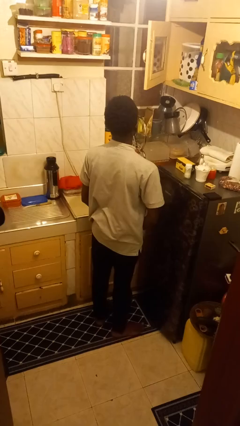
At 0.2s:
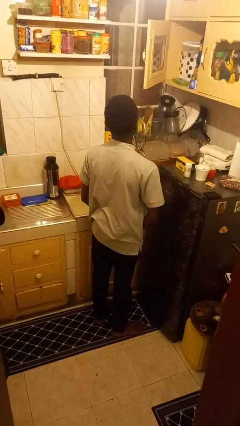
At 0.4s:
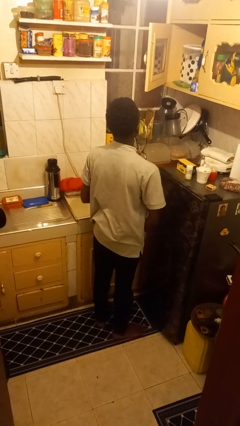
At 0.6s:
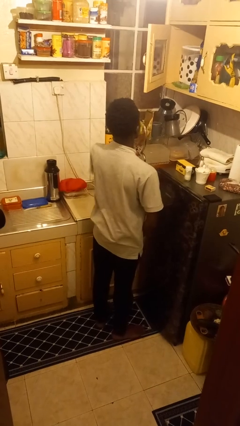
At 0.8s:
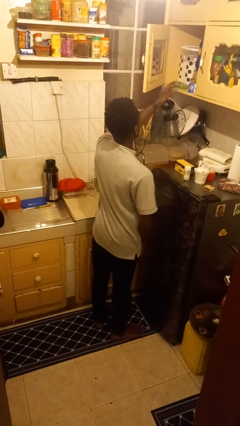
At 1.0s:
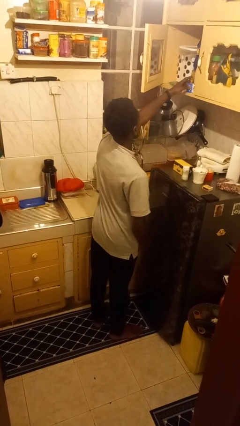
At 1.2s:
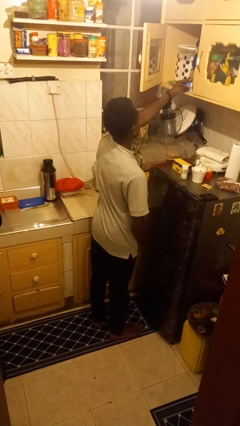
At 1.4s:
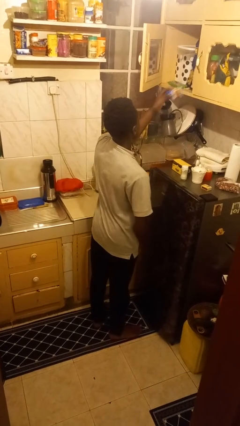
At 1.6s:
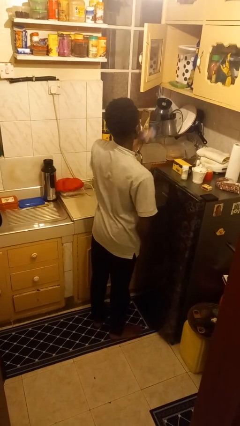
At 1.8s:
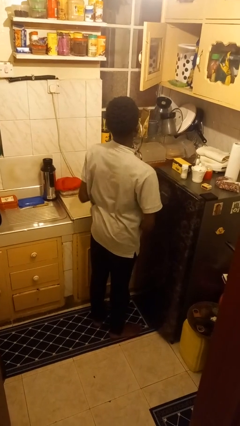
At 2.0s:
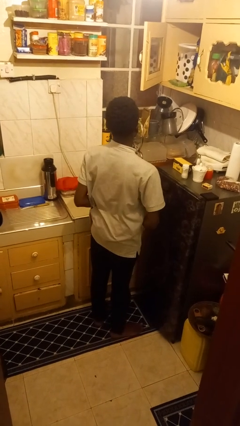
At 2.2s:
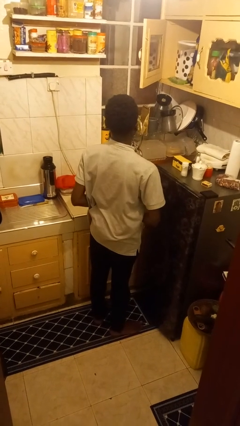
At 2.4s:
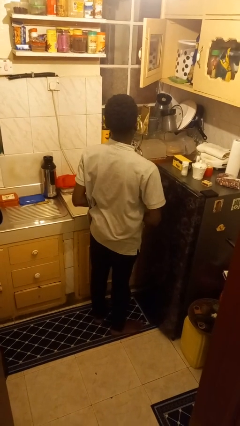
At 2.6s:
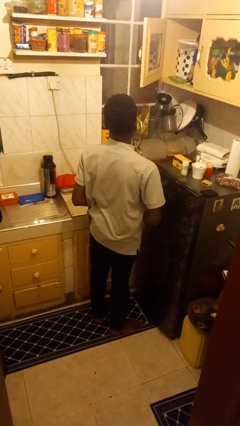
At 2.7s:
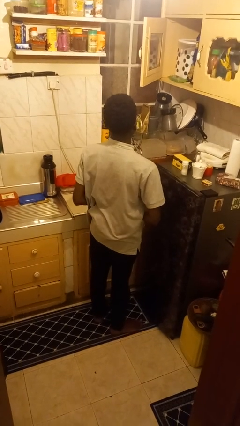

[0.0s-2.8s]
person picks up object from cabinet

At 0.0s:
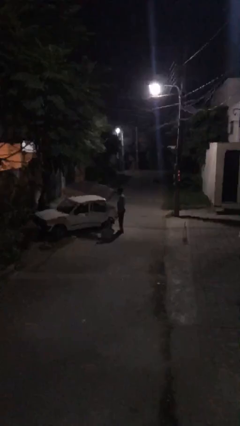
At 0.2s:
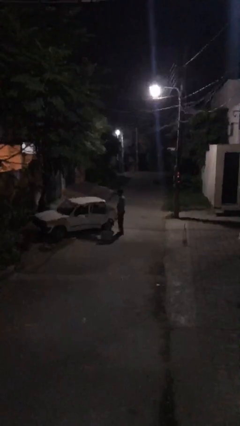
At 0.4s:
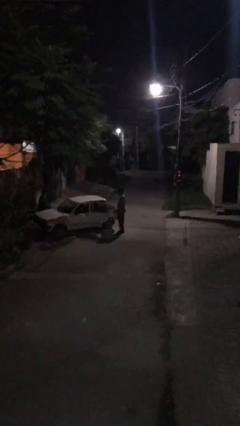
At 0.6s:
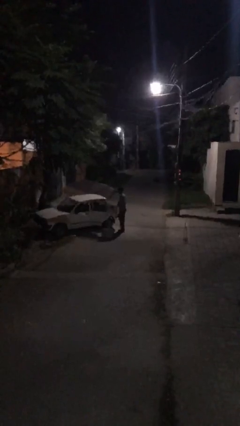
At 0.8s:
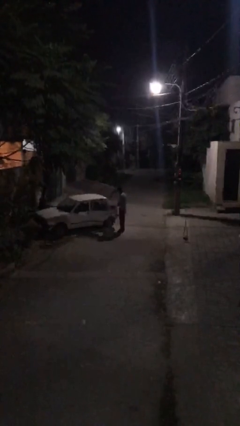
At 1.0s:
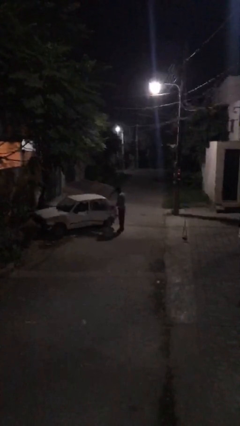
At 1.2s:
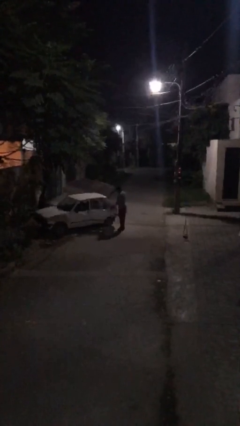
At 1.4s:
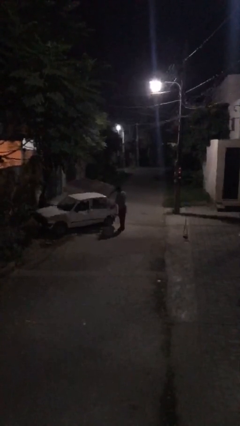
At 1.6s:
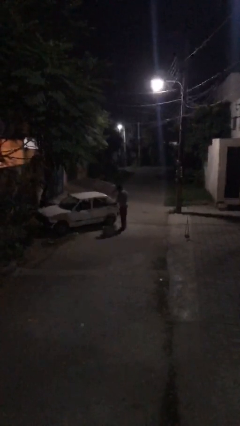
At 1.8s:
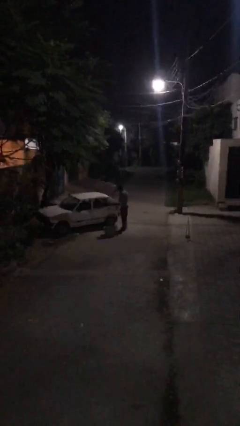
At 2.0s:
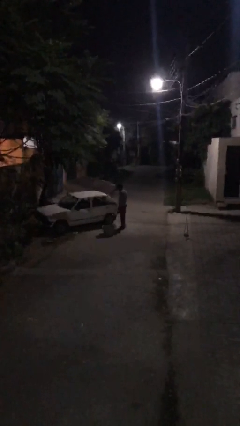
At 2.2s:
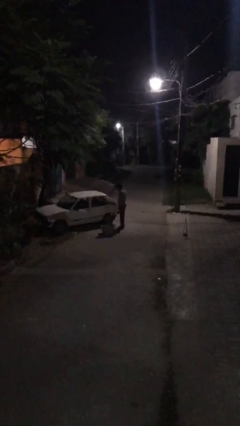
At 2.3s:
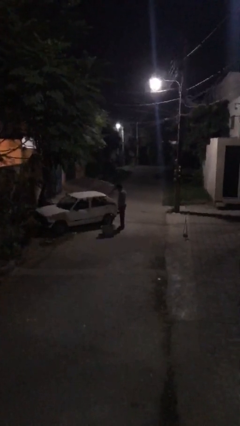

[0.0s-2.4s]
person closes car door

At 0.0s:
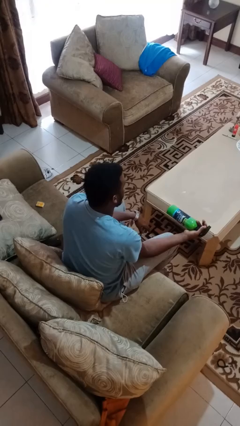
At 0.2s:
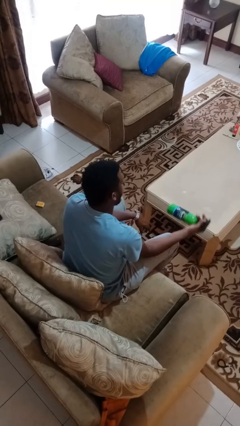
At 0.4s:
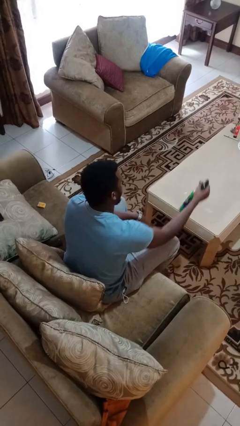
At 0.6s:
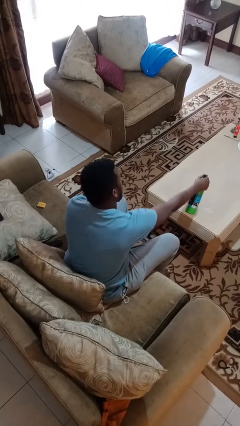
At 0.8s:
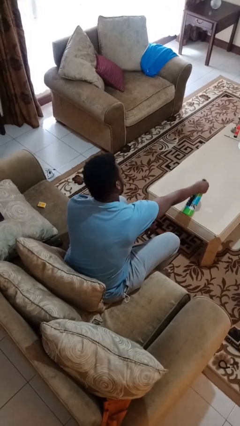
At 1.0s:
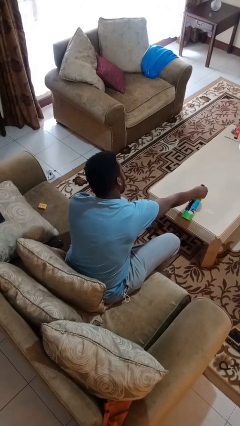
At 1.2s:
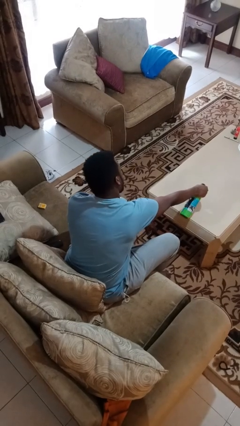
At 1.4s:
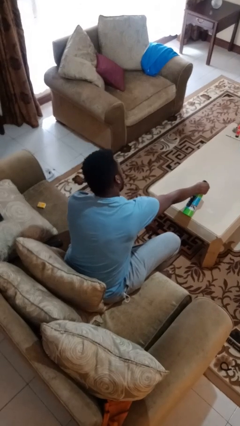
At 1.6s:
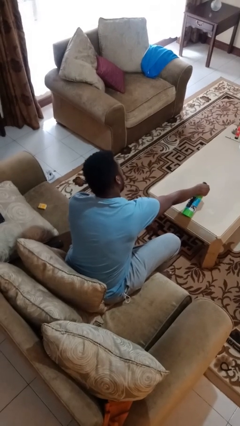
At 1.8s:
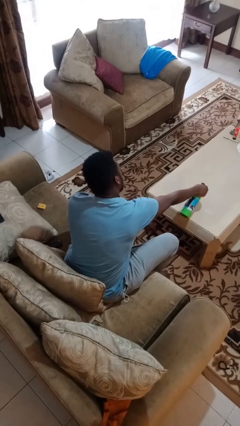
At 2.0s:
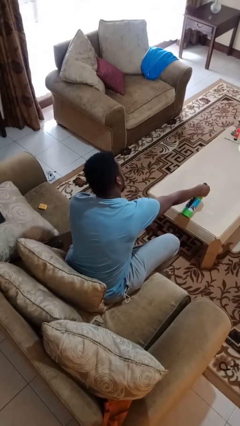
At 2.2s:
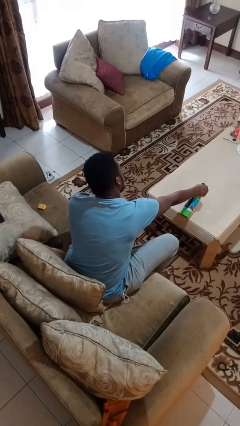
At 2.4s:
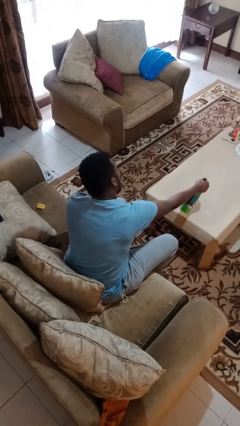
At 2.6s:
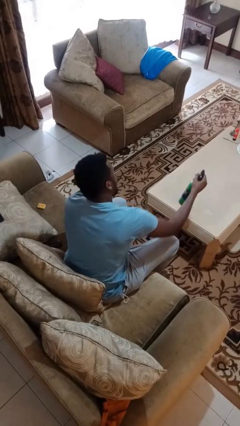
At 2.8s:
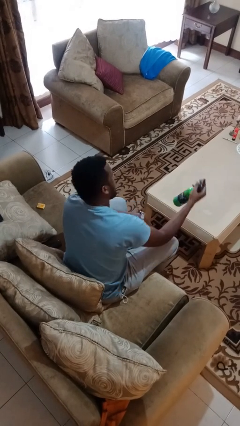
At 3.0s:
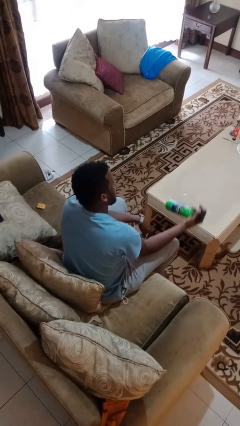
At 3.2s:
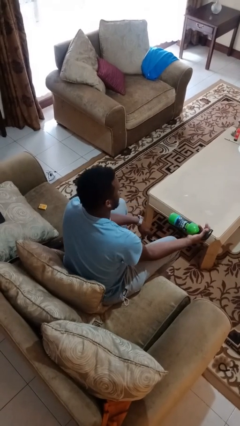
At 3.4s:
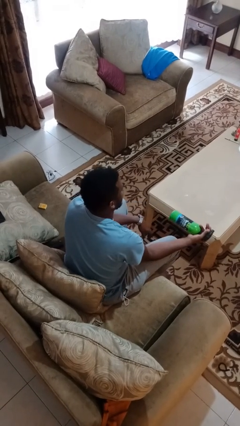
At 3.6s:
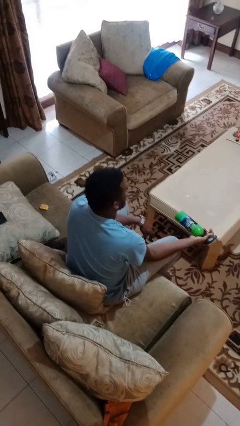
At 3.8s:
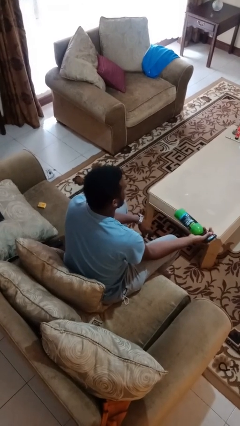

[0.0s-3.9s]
person sprays from bottle

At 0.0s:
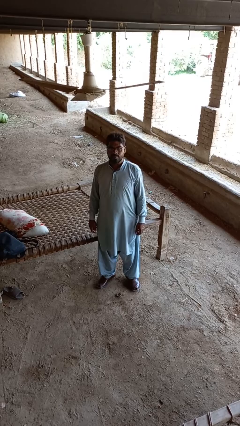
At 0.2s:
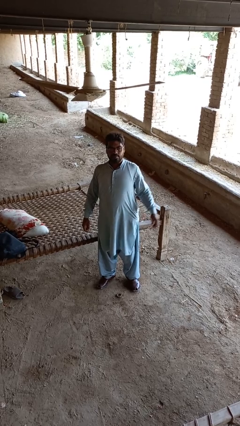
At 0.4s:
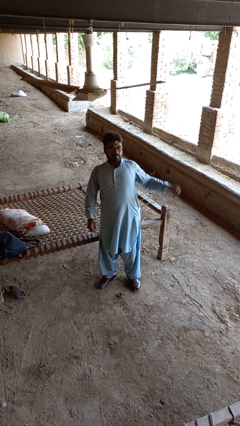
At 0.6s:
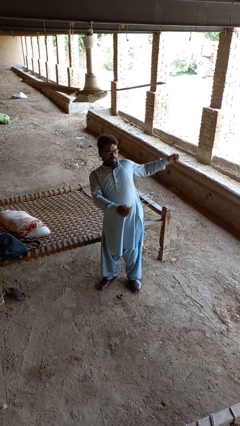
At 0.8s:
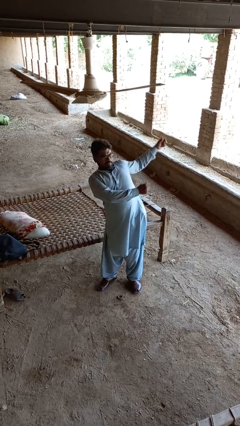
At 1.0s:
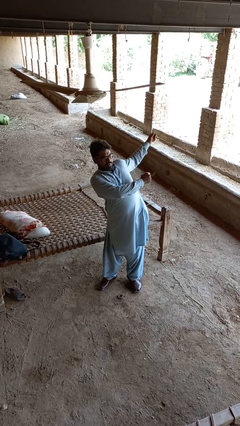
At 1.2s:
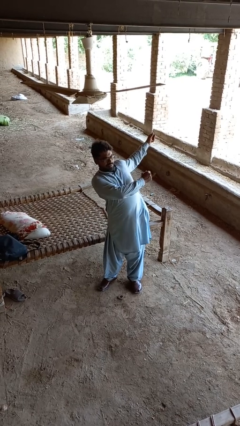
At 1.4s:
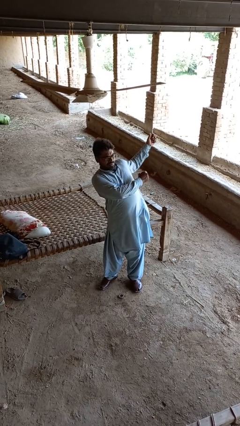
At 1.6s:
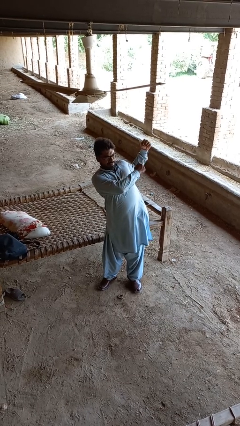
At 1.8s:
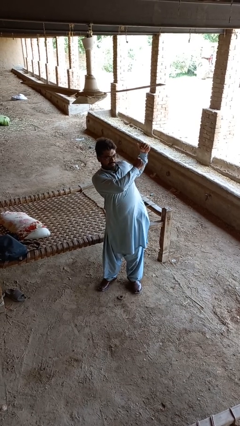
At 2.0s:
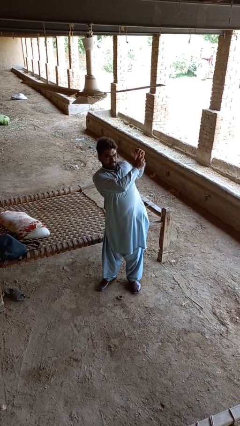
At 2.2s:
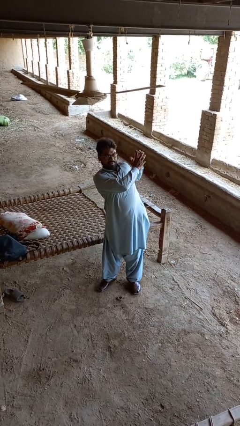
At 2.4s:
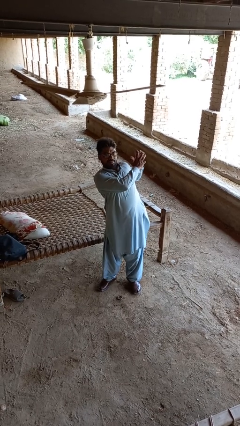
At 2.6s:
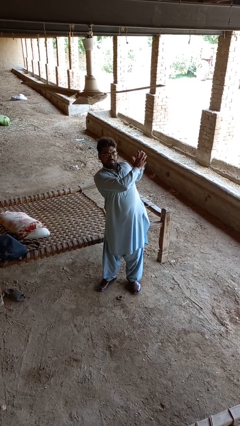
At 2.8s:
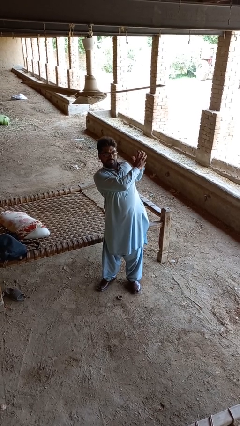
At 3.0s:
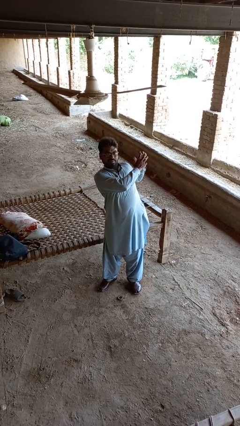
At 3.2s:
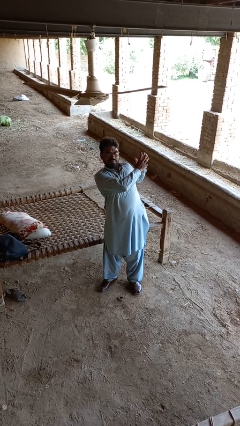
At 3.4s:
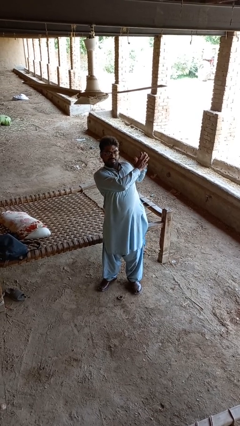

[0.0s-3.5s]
person stretches arms to side

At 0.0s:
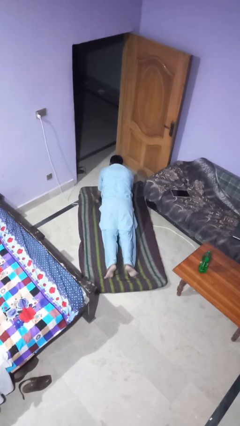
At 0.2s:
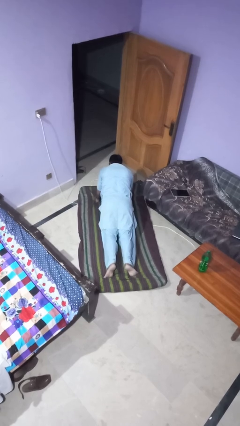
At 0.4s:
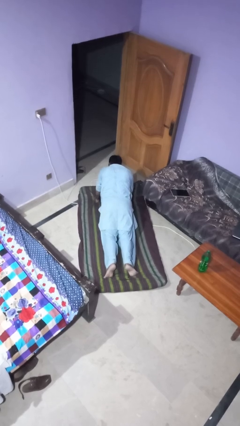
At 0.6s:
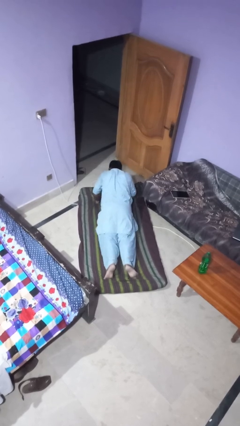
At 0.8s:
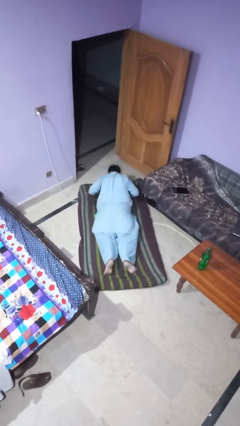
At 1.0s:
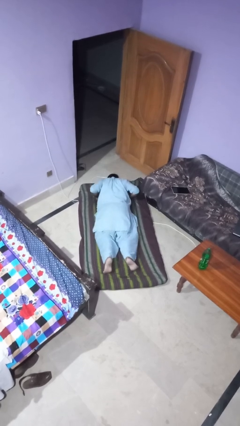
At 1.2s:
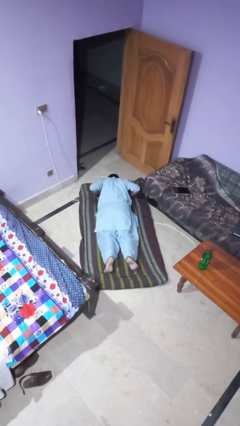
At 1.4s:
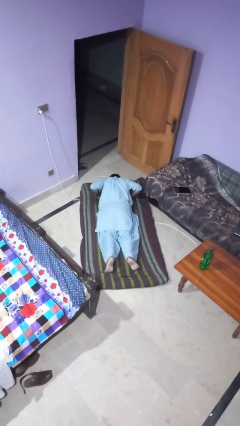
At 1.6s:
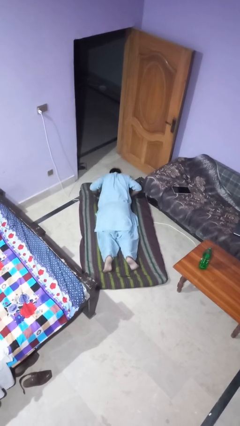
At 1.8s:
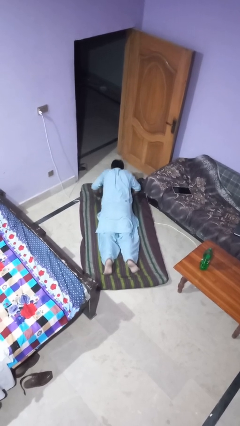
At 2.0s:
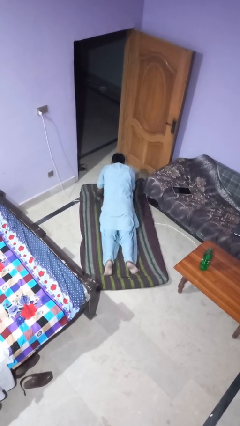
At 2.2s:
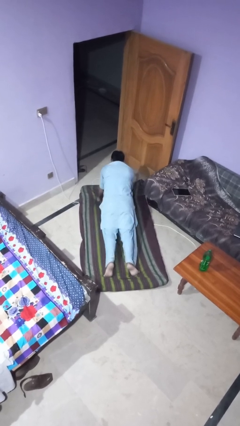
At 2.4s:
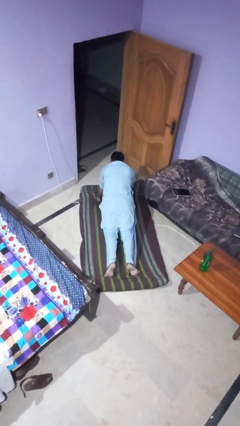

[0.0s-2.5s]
person exercises with pushup

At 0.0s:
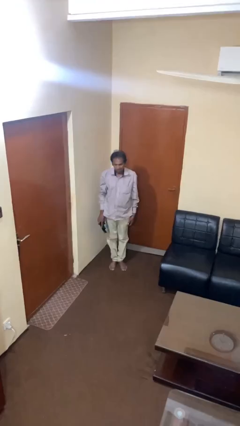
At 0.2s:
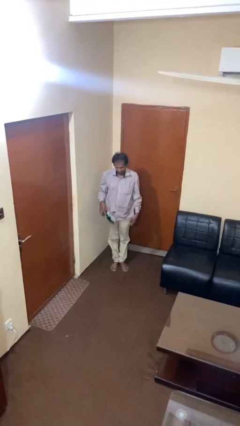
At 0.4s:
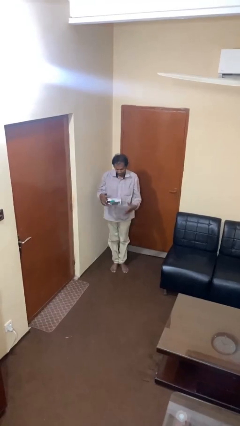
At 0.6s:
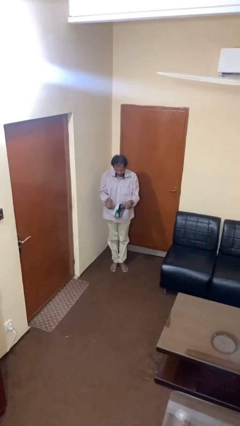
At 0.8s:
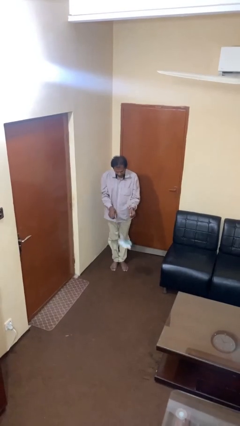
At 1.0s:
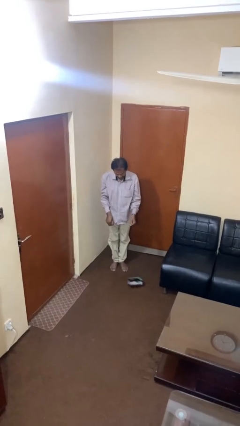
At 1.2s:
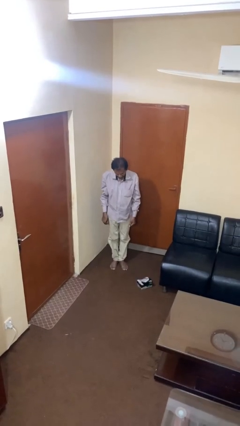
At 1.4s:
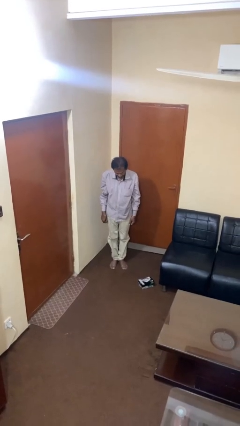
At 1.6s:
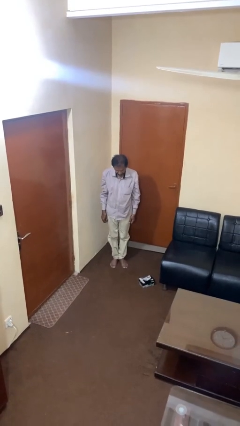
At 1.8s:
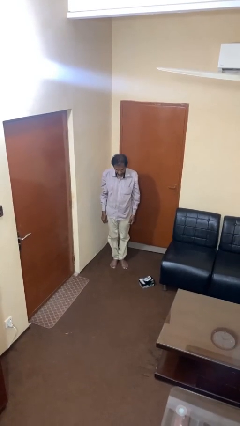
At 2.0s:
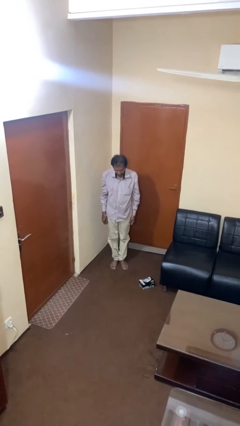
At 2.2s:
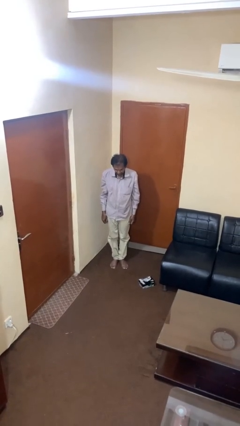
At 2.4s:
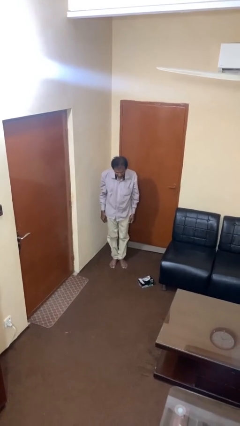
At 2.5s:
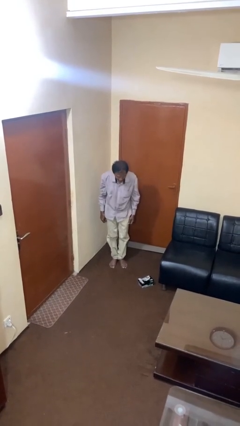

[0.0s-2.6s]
person drops object
